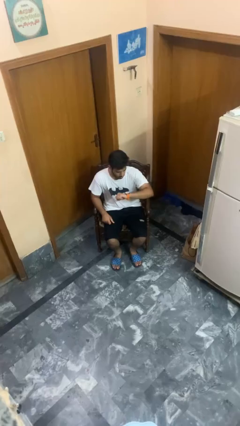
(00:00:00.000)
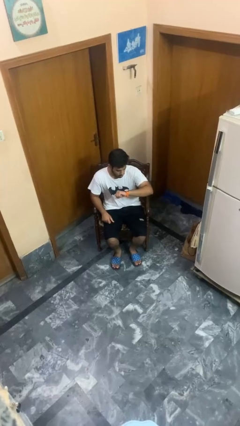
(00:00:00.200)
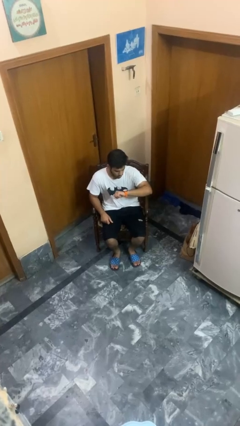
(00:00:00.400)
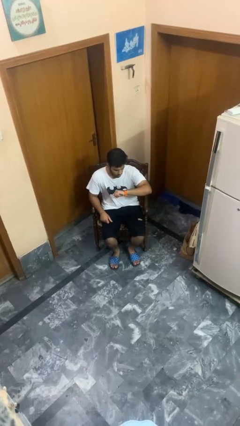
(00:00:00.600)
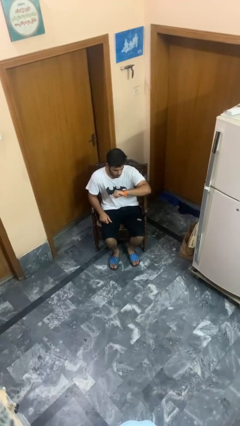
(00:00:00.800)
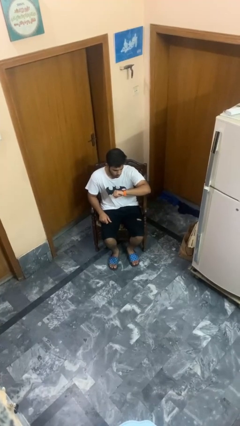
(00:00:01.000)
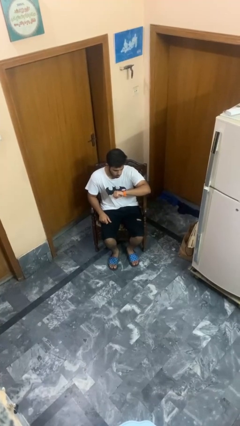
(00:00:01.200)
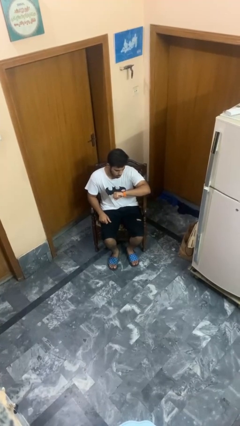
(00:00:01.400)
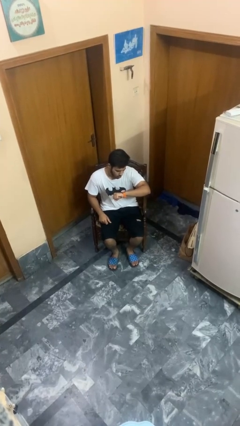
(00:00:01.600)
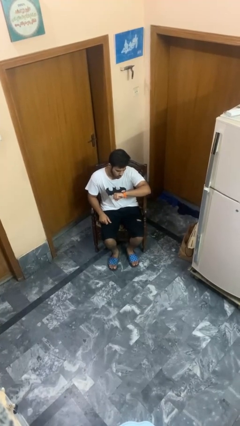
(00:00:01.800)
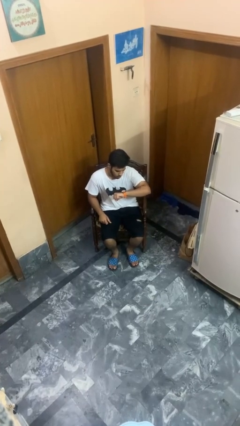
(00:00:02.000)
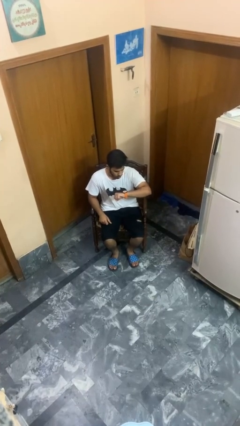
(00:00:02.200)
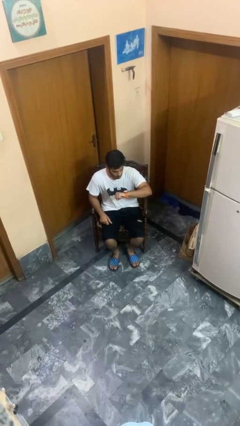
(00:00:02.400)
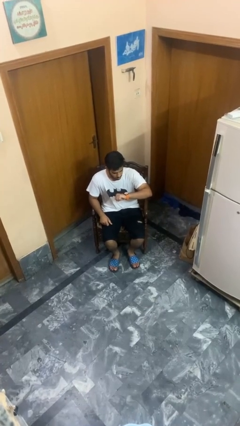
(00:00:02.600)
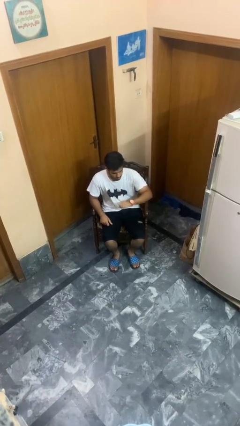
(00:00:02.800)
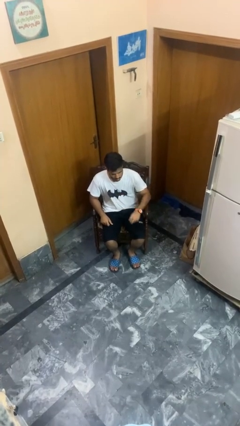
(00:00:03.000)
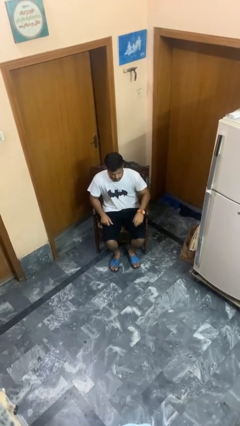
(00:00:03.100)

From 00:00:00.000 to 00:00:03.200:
person looks at wristwatch

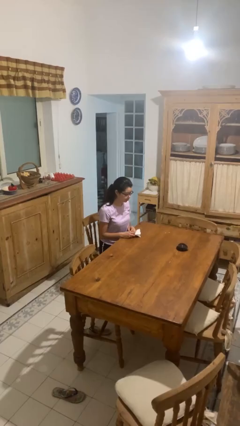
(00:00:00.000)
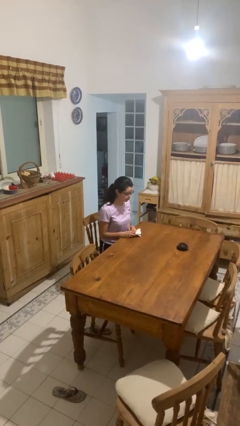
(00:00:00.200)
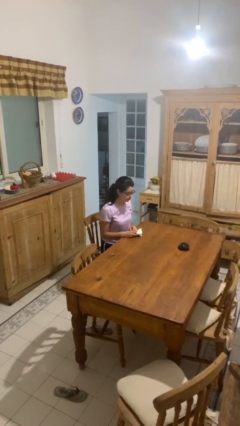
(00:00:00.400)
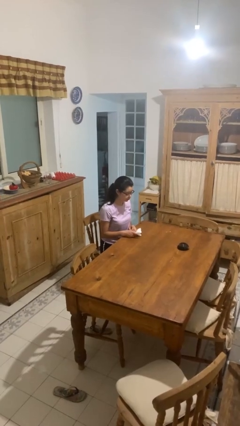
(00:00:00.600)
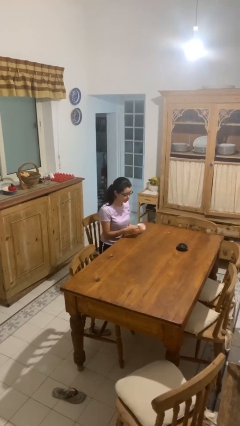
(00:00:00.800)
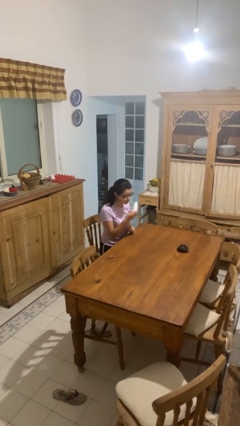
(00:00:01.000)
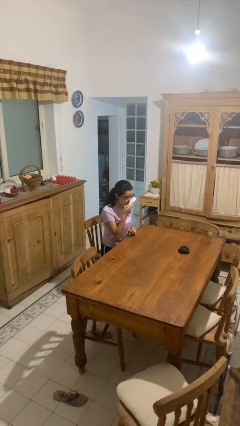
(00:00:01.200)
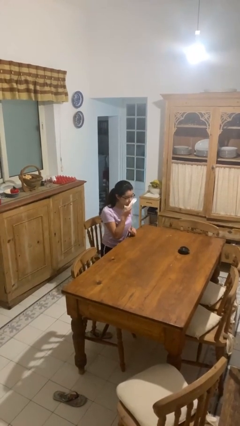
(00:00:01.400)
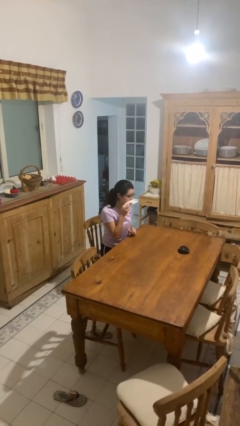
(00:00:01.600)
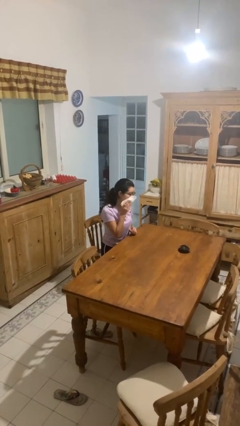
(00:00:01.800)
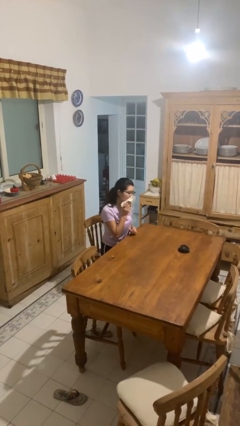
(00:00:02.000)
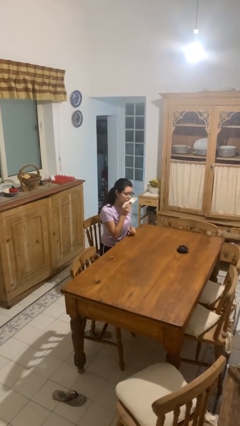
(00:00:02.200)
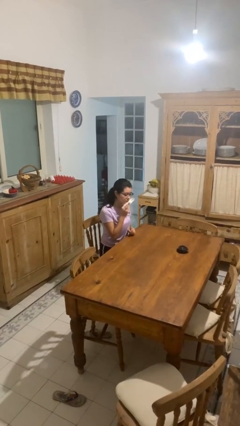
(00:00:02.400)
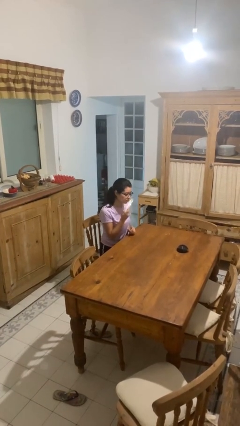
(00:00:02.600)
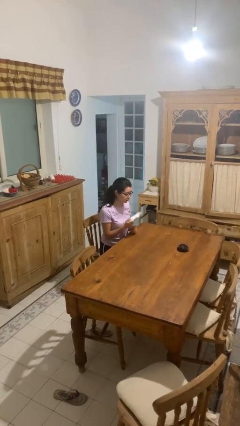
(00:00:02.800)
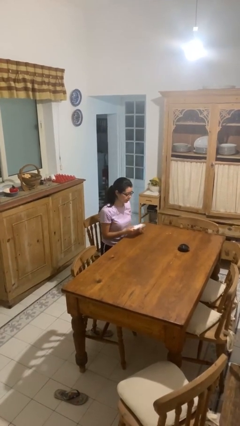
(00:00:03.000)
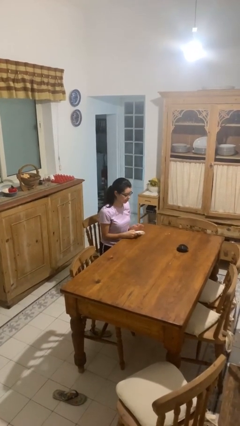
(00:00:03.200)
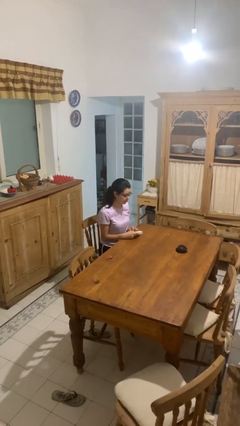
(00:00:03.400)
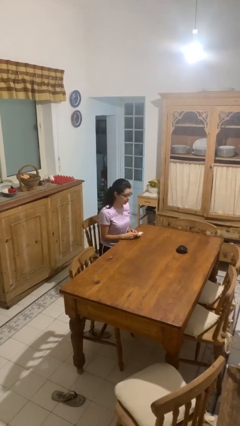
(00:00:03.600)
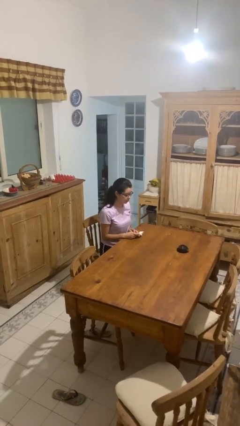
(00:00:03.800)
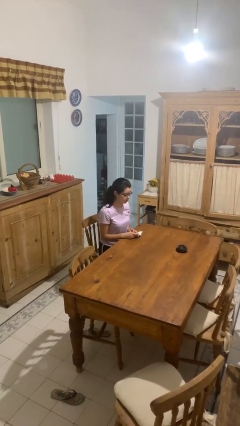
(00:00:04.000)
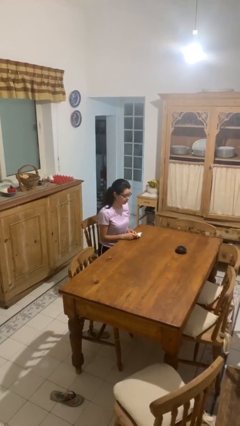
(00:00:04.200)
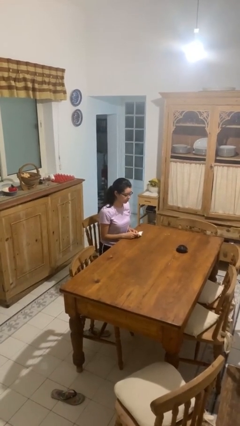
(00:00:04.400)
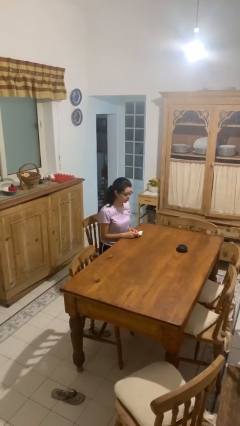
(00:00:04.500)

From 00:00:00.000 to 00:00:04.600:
person wipes mouth with napkin

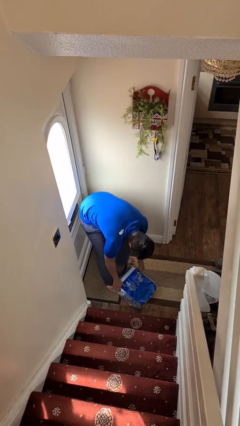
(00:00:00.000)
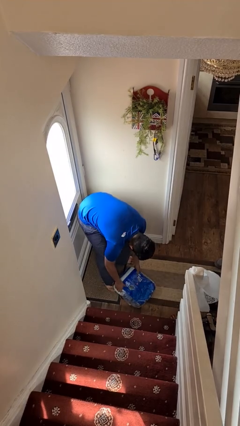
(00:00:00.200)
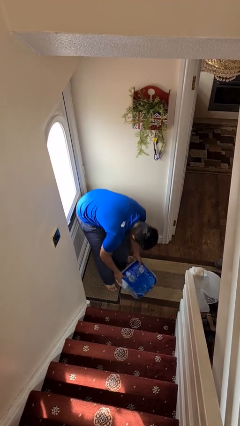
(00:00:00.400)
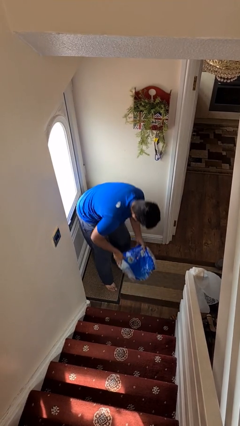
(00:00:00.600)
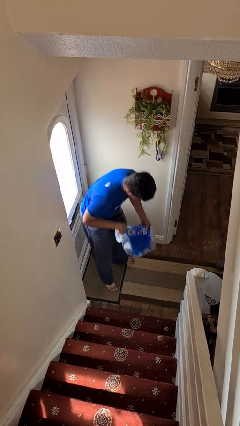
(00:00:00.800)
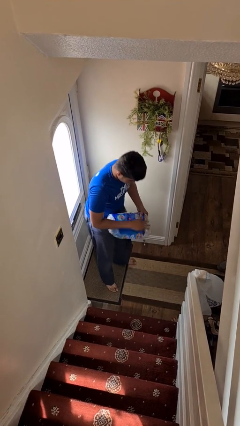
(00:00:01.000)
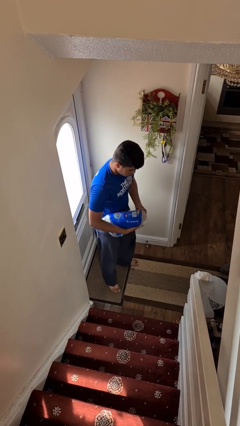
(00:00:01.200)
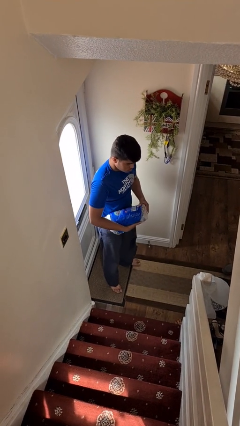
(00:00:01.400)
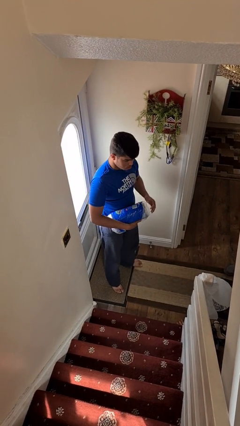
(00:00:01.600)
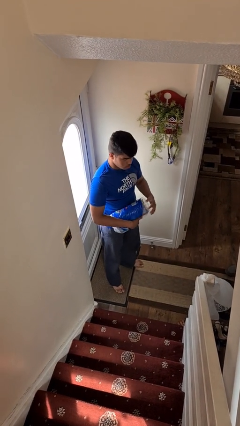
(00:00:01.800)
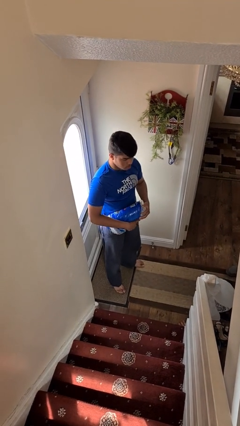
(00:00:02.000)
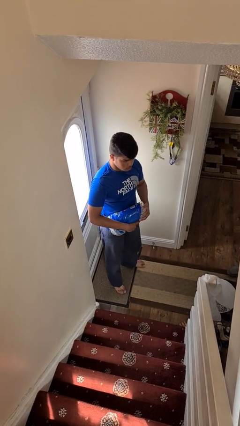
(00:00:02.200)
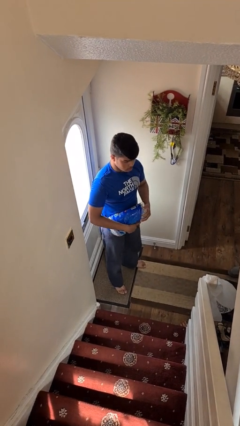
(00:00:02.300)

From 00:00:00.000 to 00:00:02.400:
person picks up object from floor

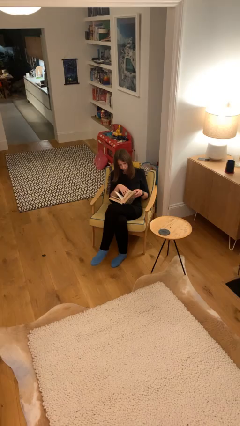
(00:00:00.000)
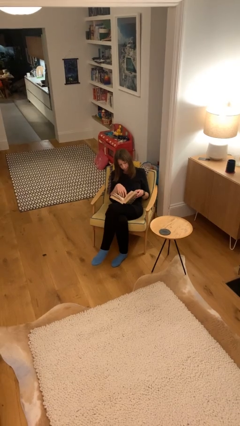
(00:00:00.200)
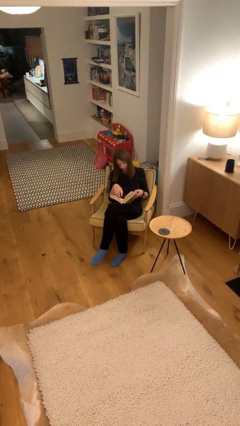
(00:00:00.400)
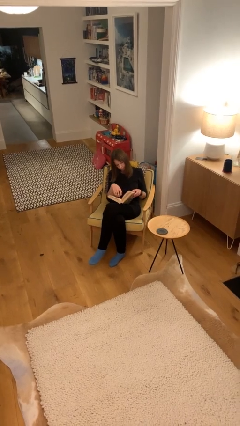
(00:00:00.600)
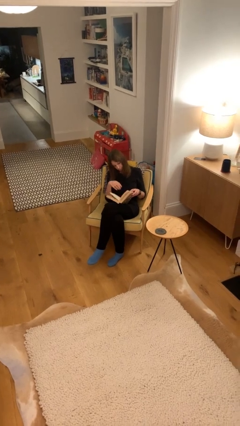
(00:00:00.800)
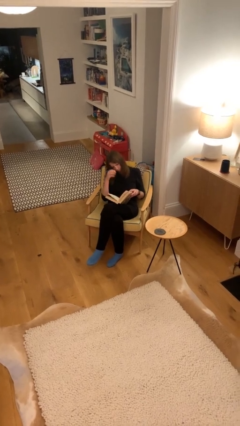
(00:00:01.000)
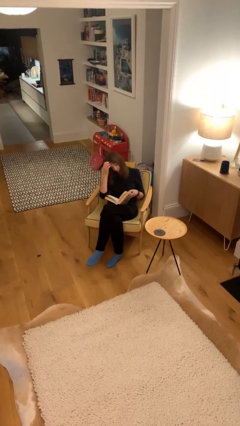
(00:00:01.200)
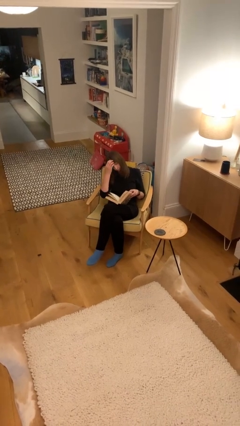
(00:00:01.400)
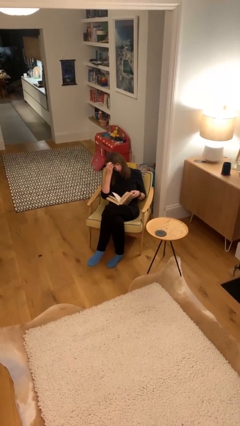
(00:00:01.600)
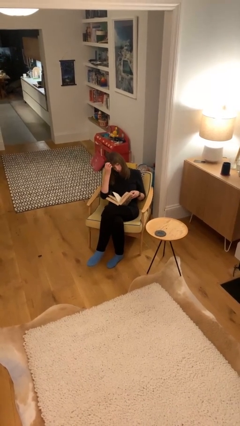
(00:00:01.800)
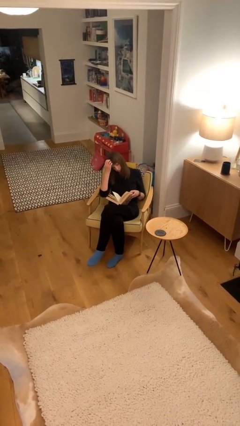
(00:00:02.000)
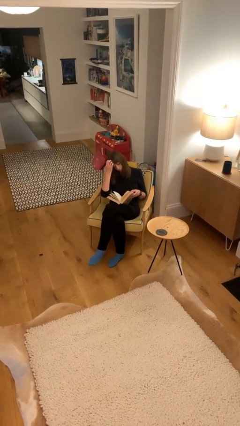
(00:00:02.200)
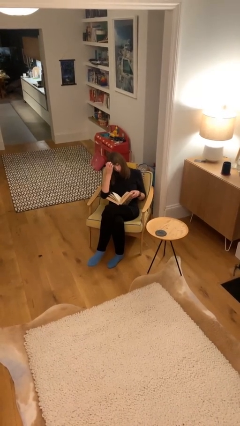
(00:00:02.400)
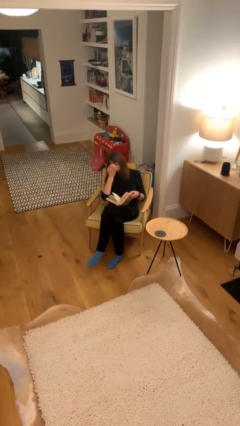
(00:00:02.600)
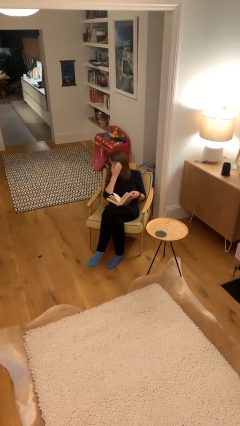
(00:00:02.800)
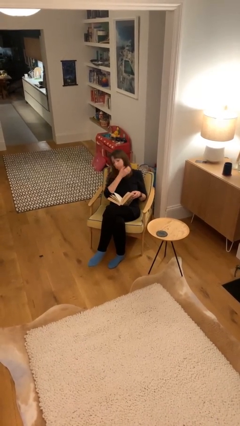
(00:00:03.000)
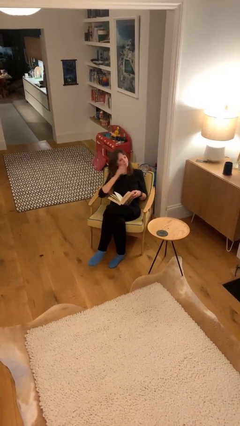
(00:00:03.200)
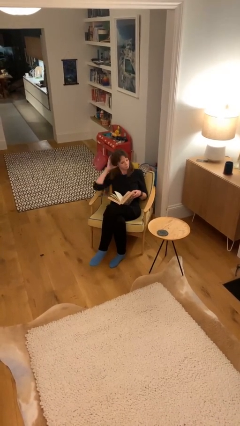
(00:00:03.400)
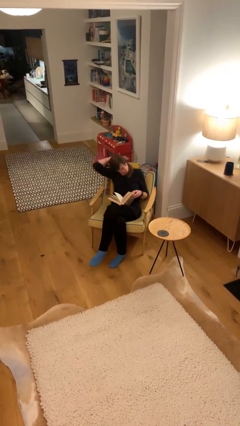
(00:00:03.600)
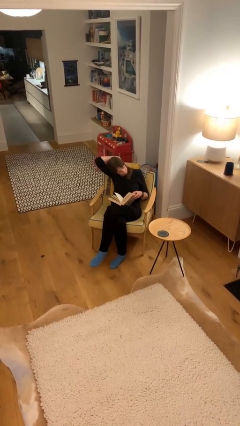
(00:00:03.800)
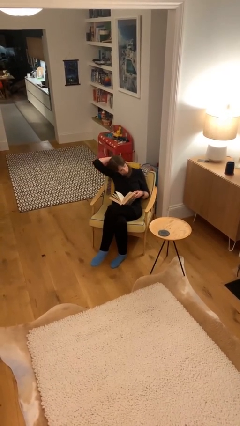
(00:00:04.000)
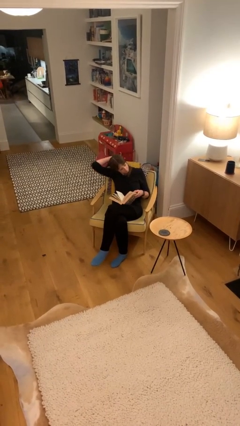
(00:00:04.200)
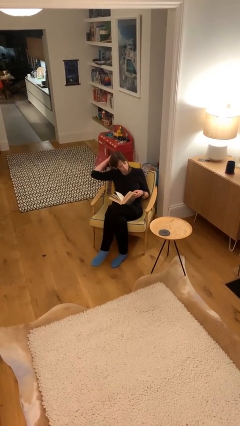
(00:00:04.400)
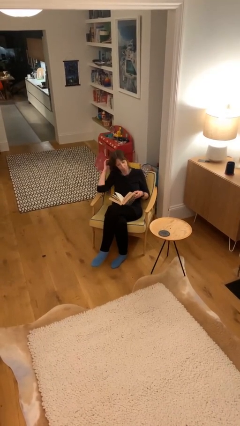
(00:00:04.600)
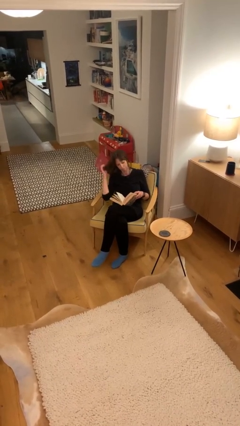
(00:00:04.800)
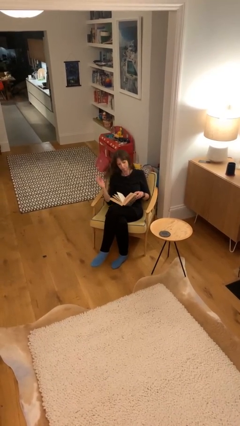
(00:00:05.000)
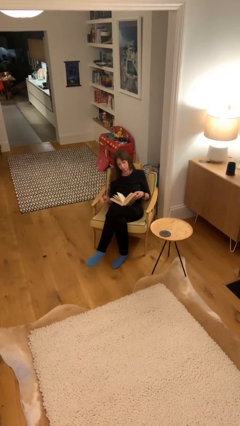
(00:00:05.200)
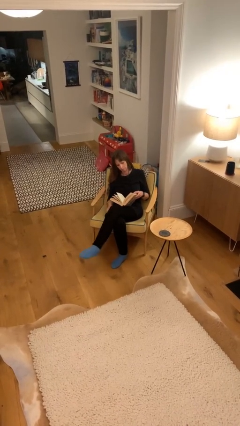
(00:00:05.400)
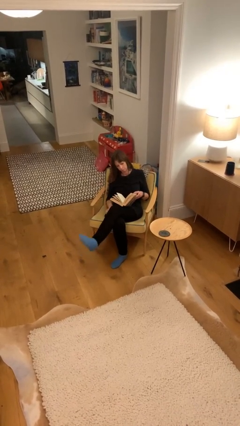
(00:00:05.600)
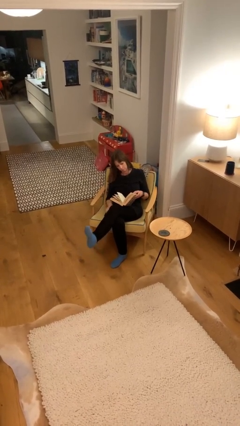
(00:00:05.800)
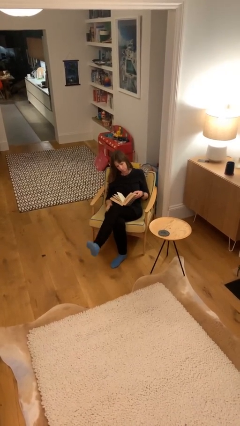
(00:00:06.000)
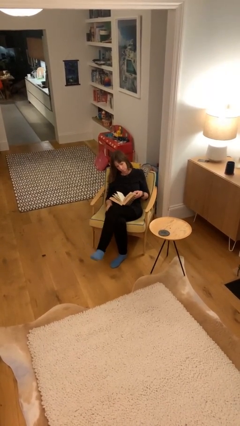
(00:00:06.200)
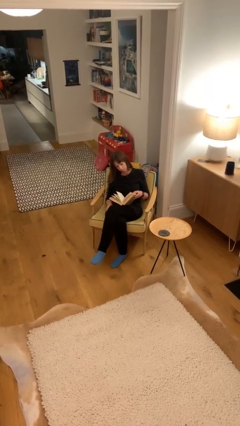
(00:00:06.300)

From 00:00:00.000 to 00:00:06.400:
person reads document

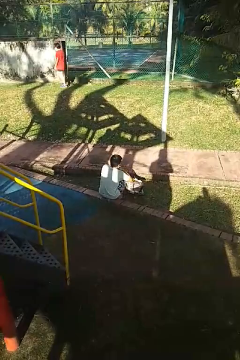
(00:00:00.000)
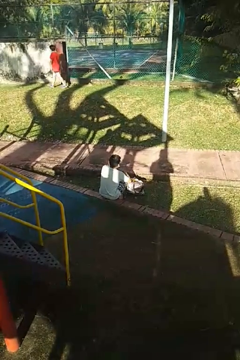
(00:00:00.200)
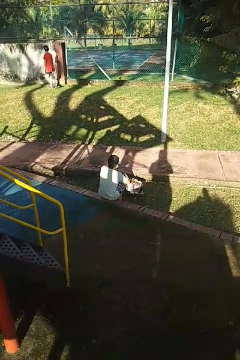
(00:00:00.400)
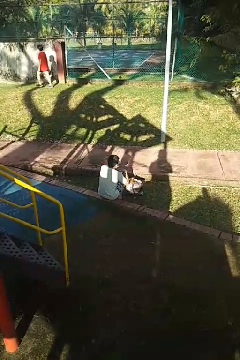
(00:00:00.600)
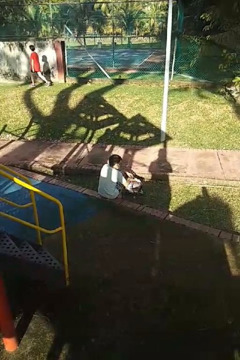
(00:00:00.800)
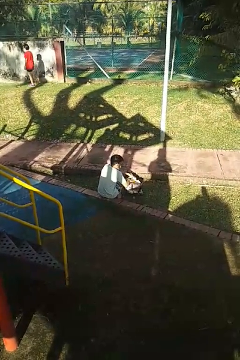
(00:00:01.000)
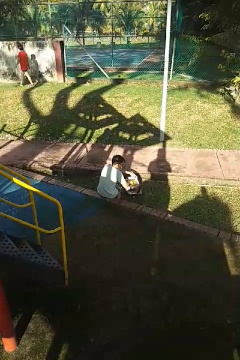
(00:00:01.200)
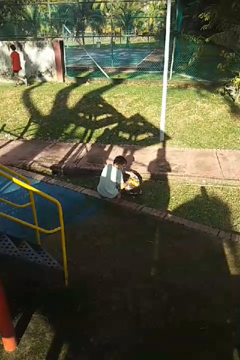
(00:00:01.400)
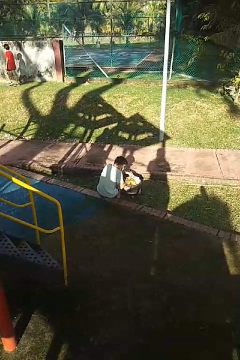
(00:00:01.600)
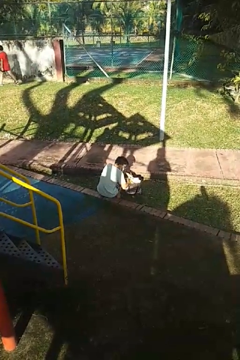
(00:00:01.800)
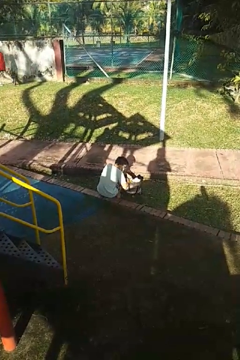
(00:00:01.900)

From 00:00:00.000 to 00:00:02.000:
person searches in bag
